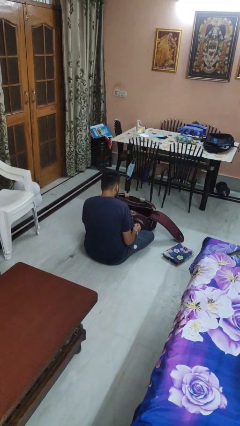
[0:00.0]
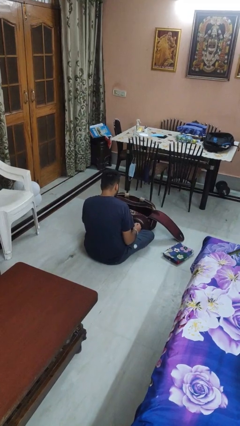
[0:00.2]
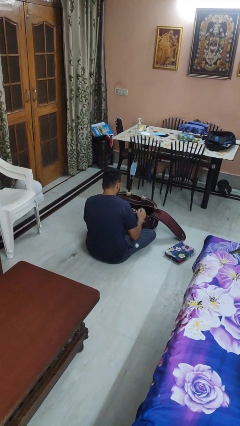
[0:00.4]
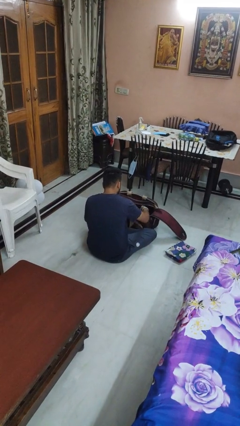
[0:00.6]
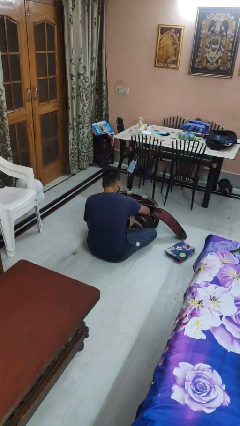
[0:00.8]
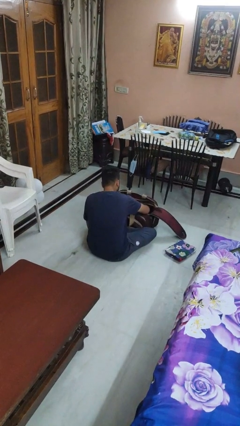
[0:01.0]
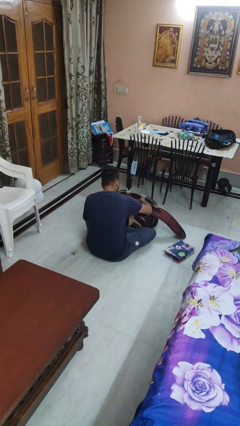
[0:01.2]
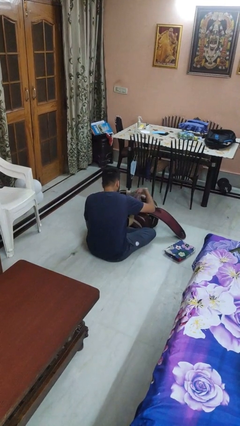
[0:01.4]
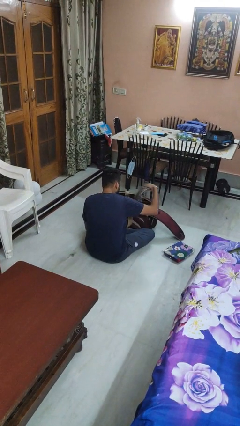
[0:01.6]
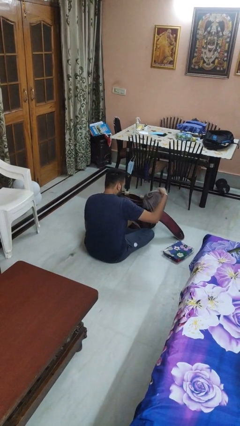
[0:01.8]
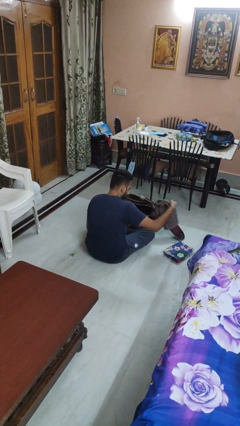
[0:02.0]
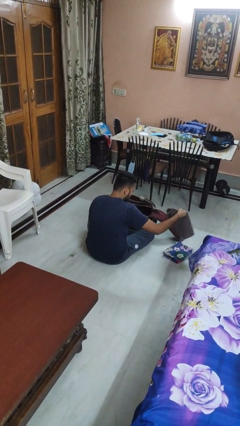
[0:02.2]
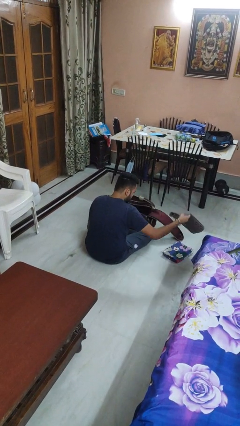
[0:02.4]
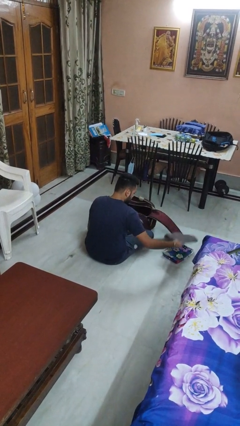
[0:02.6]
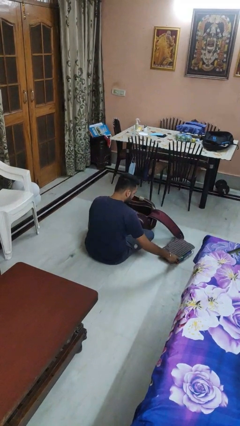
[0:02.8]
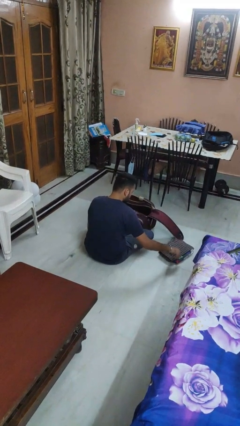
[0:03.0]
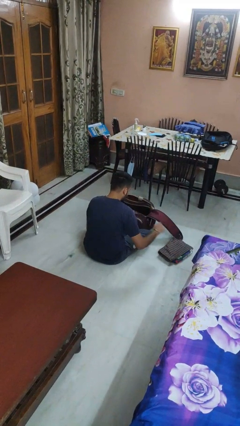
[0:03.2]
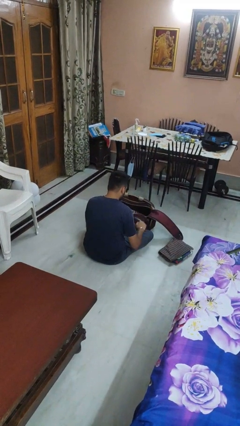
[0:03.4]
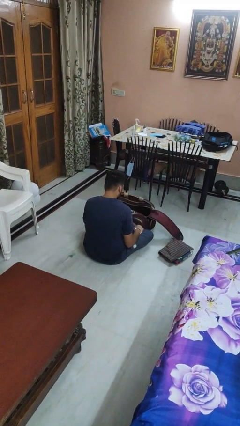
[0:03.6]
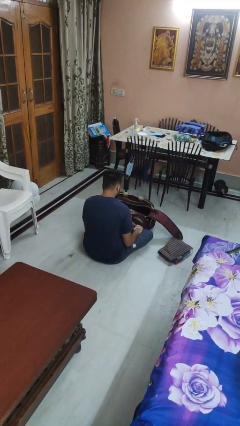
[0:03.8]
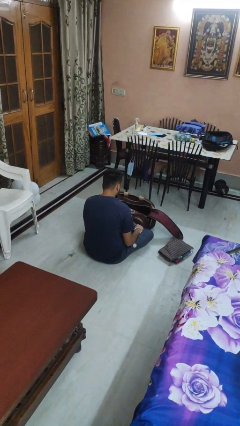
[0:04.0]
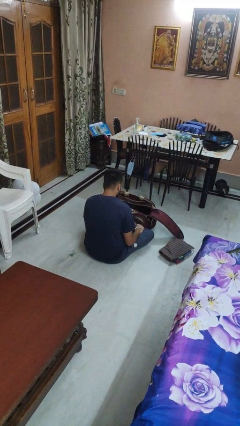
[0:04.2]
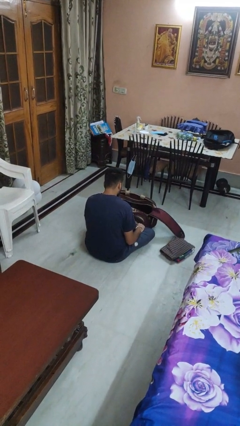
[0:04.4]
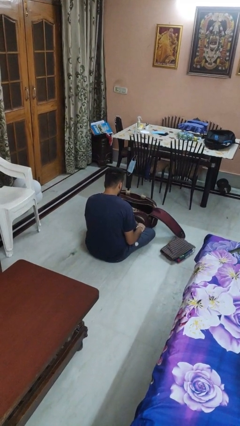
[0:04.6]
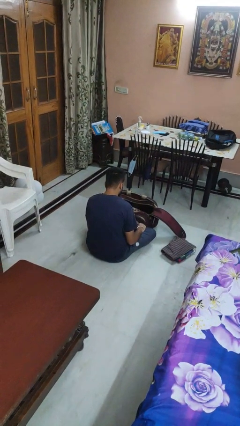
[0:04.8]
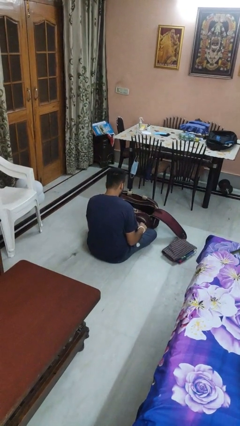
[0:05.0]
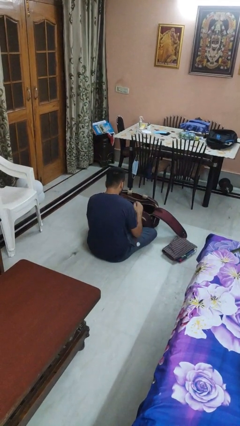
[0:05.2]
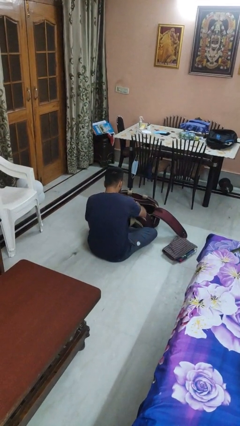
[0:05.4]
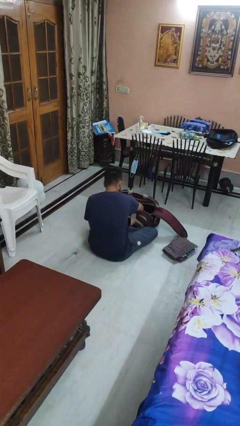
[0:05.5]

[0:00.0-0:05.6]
person arranges flowers in vase

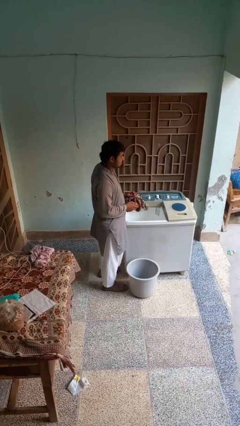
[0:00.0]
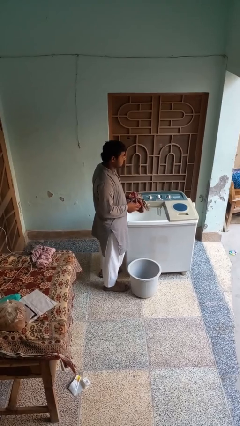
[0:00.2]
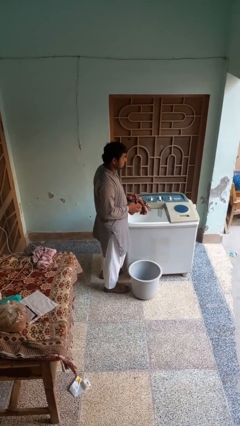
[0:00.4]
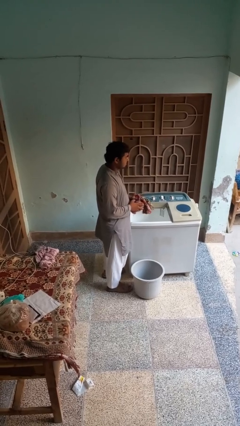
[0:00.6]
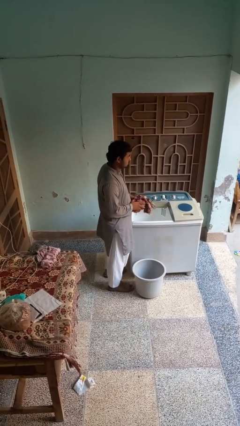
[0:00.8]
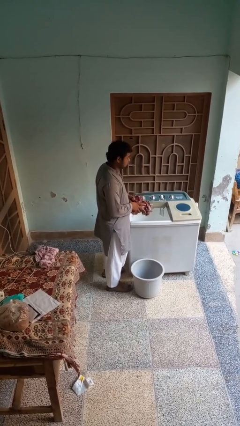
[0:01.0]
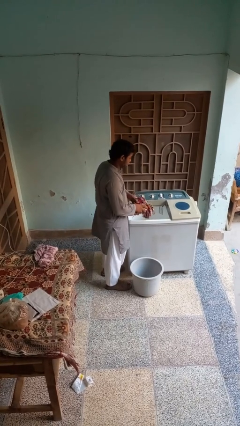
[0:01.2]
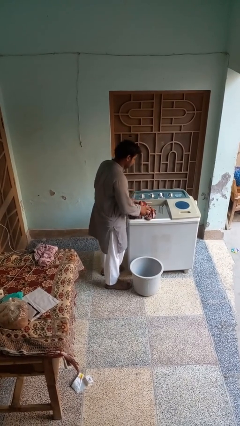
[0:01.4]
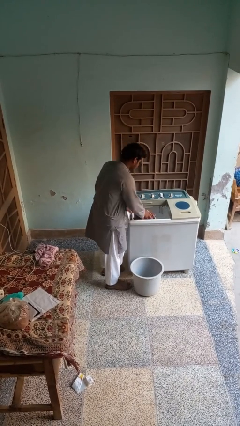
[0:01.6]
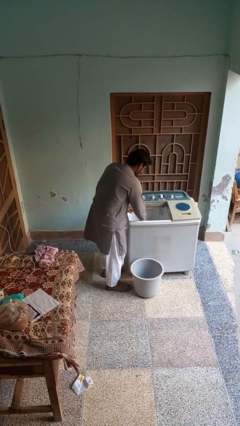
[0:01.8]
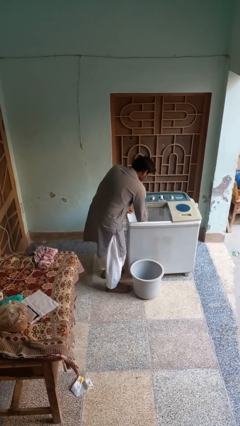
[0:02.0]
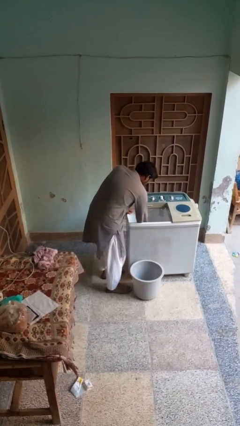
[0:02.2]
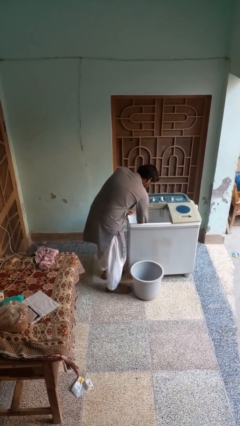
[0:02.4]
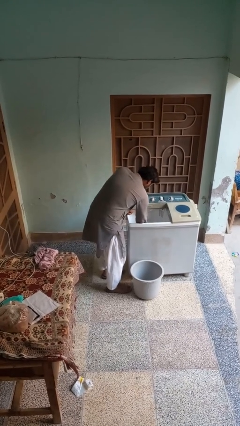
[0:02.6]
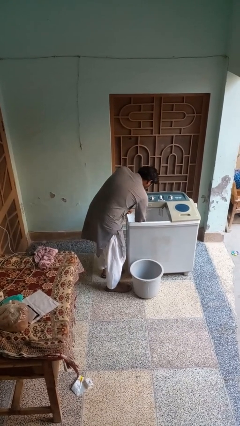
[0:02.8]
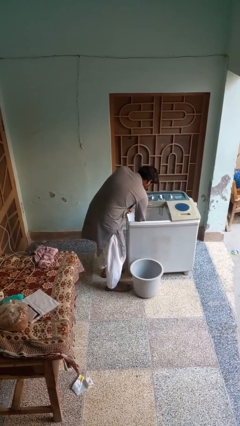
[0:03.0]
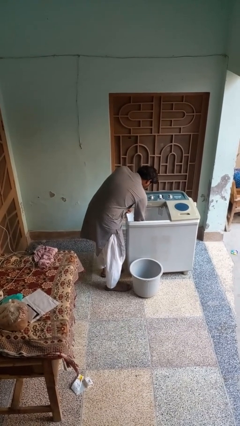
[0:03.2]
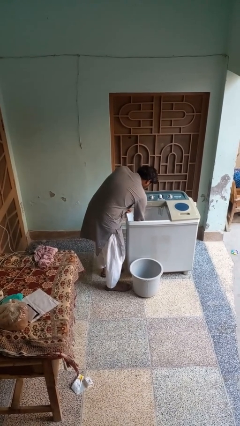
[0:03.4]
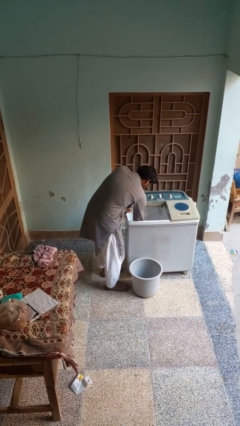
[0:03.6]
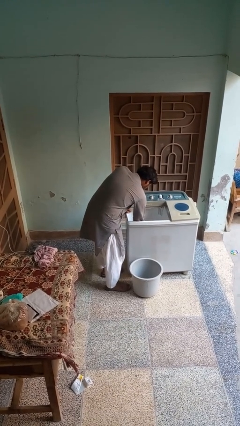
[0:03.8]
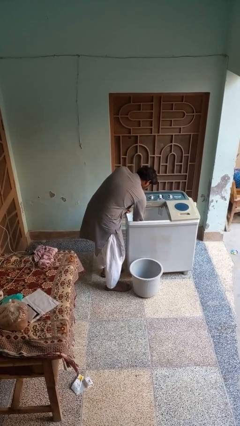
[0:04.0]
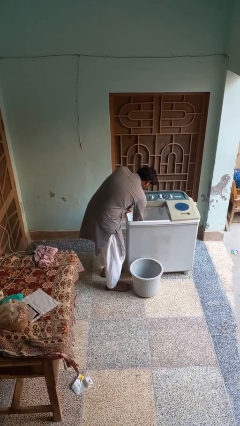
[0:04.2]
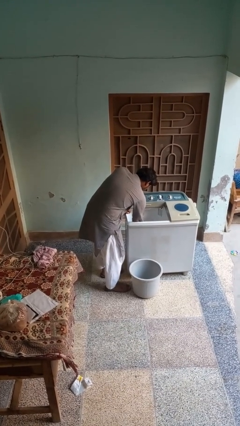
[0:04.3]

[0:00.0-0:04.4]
person loads clotheswasher

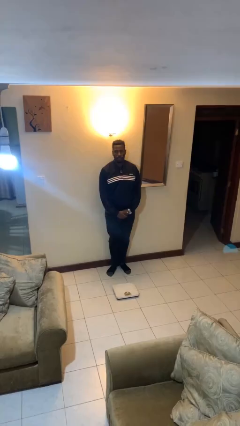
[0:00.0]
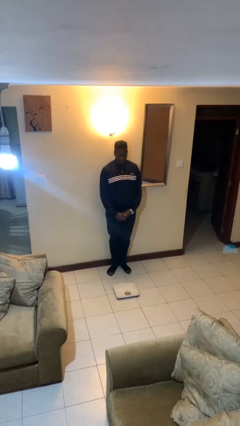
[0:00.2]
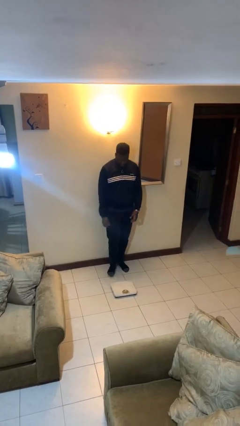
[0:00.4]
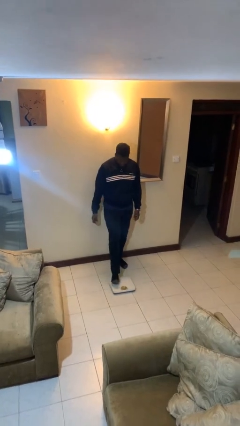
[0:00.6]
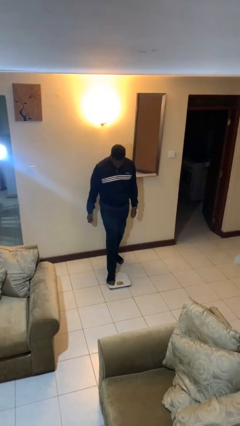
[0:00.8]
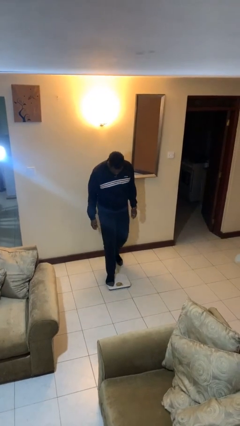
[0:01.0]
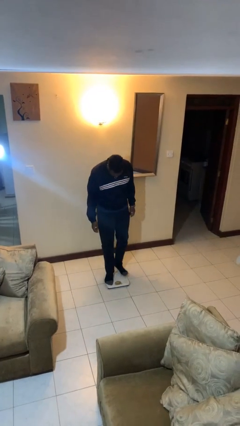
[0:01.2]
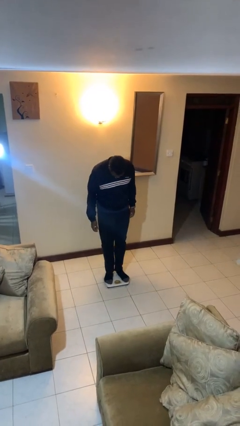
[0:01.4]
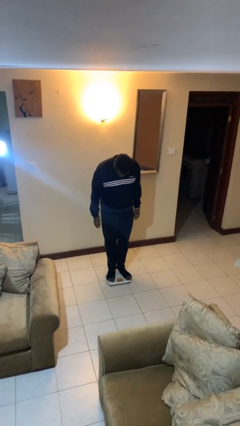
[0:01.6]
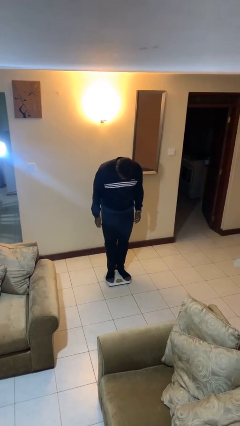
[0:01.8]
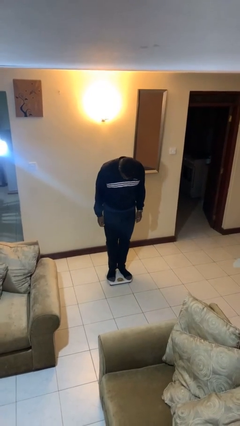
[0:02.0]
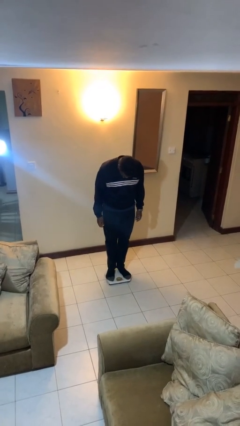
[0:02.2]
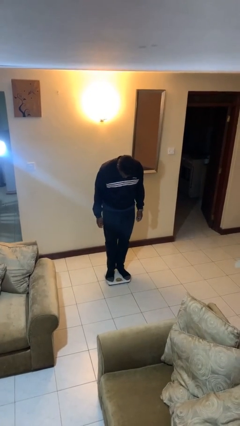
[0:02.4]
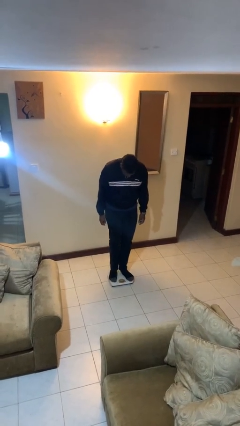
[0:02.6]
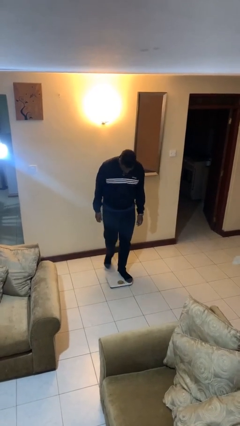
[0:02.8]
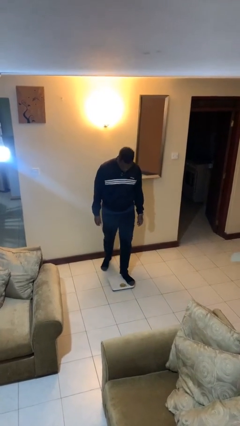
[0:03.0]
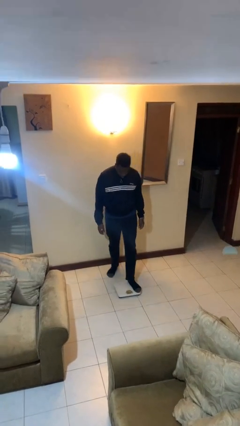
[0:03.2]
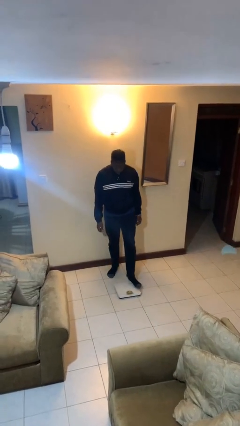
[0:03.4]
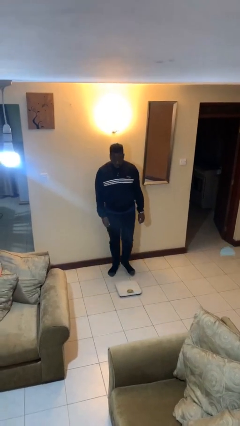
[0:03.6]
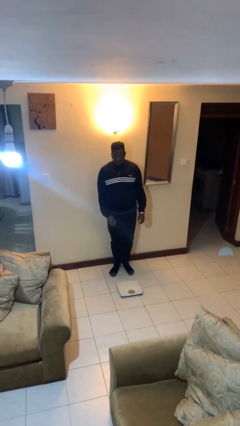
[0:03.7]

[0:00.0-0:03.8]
person uses bodyweight scale

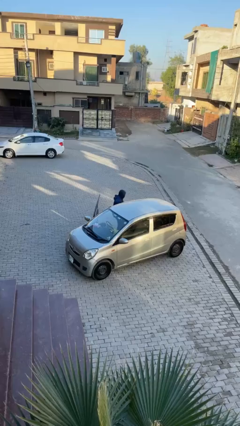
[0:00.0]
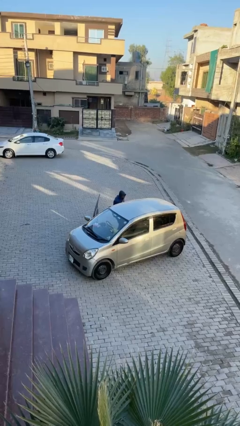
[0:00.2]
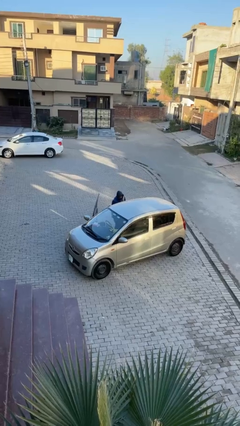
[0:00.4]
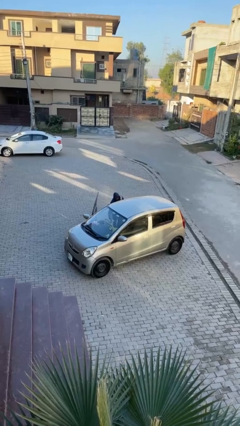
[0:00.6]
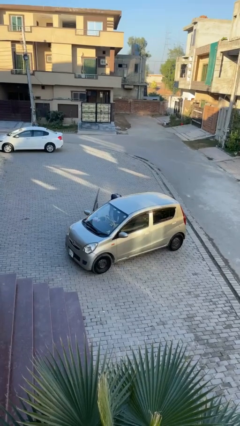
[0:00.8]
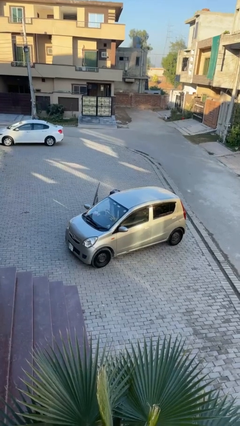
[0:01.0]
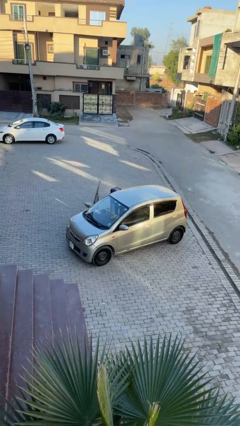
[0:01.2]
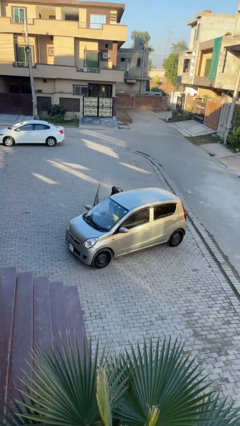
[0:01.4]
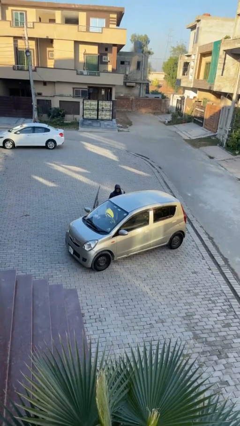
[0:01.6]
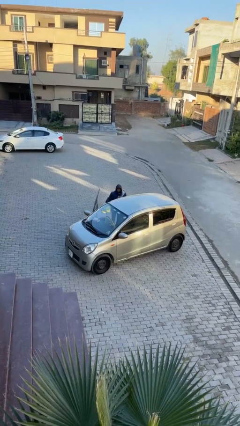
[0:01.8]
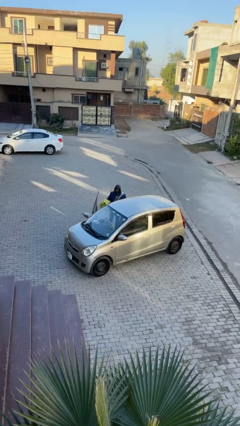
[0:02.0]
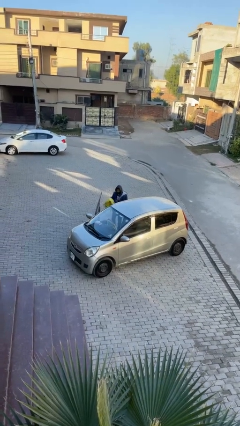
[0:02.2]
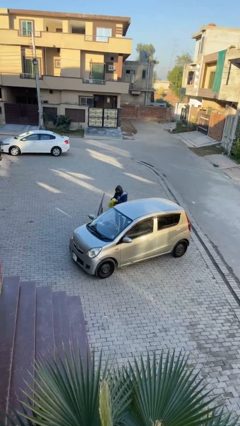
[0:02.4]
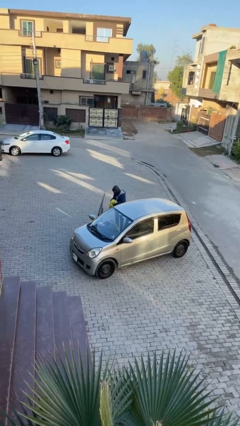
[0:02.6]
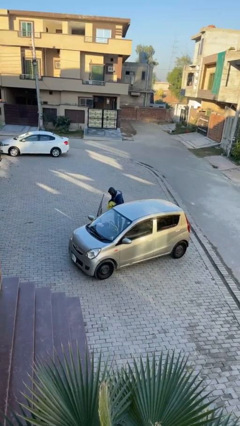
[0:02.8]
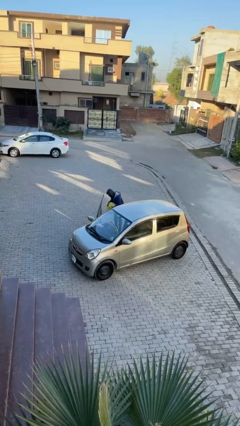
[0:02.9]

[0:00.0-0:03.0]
person unloads car

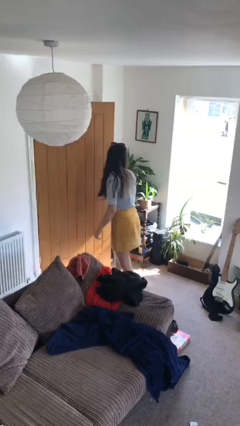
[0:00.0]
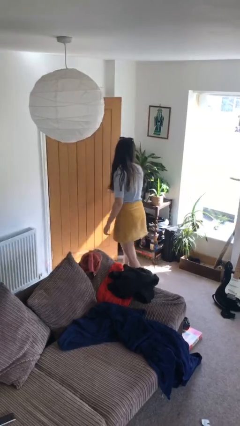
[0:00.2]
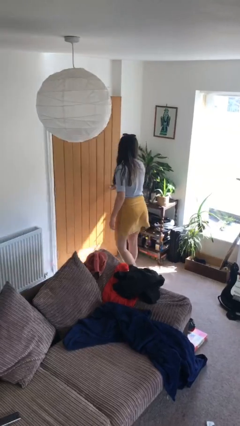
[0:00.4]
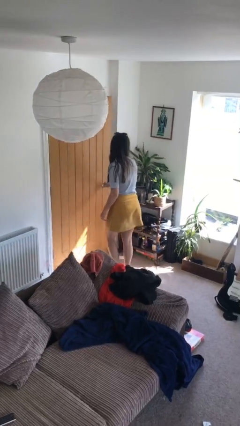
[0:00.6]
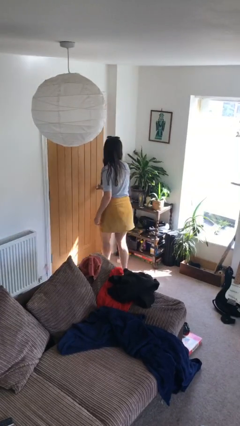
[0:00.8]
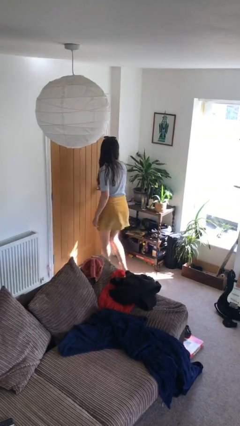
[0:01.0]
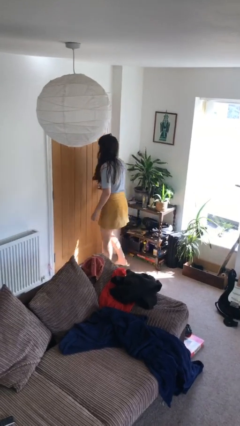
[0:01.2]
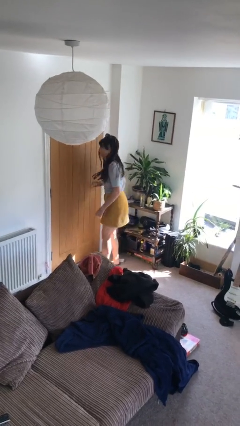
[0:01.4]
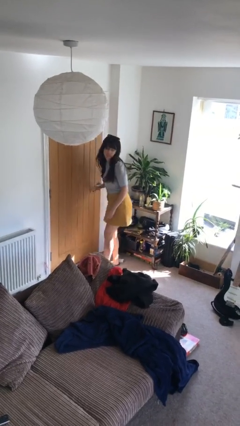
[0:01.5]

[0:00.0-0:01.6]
person closes facility door
